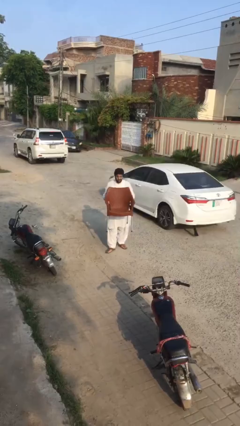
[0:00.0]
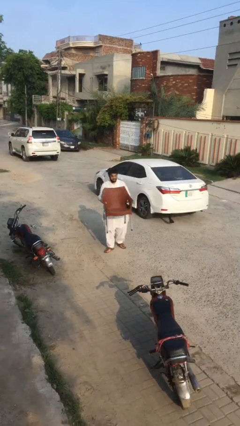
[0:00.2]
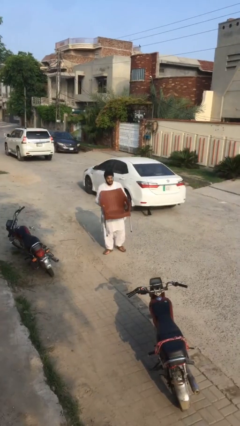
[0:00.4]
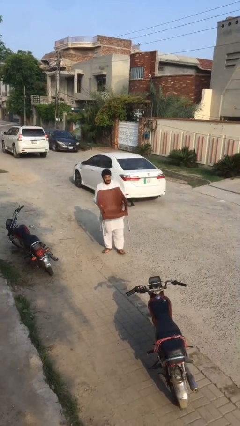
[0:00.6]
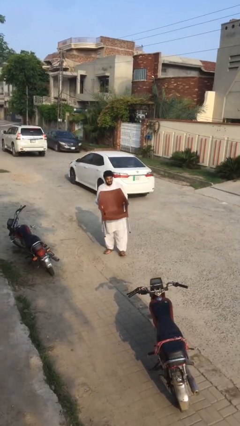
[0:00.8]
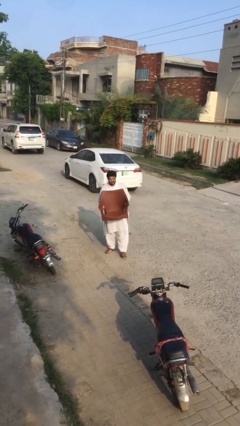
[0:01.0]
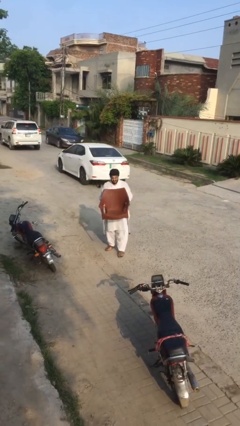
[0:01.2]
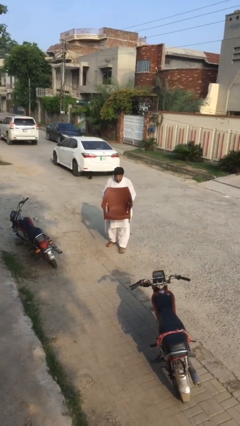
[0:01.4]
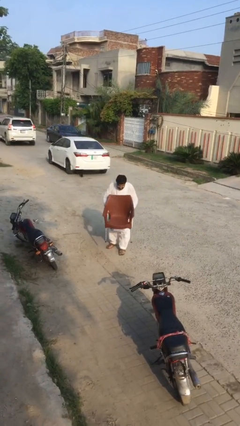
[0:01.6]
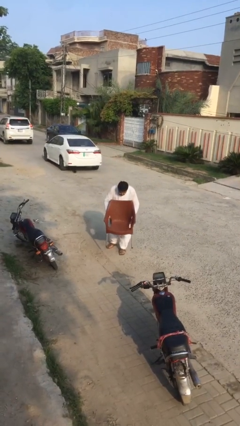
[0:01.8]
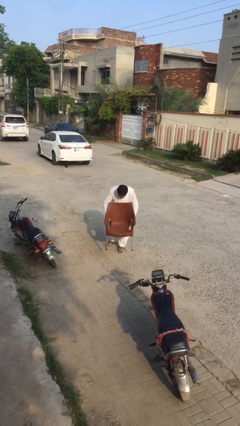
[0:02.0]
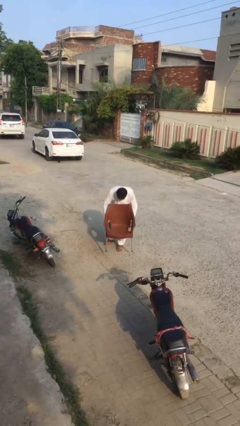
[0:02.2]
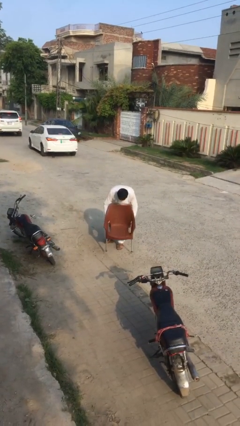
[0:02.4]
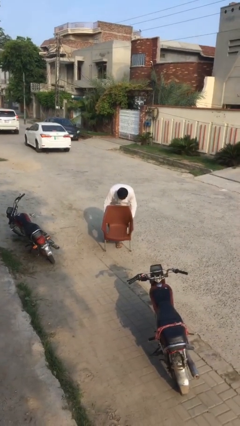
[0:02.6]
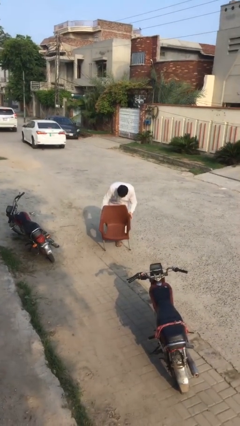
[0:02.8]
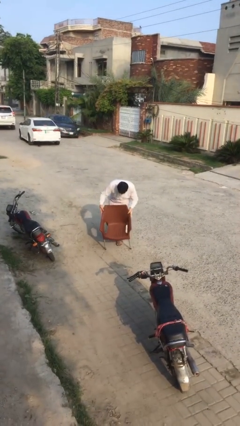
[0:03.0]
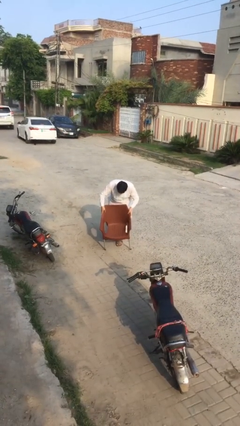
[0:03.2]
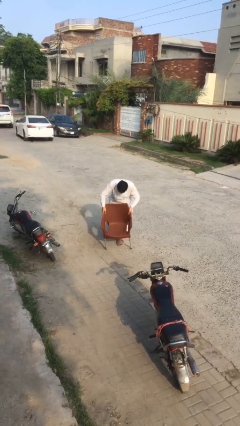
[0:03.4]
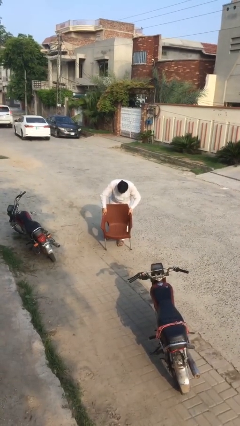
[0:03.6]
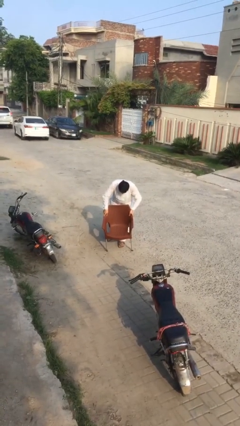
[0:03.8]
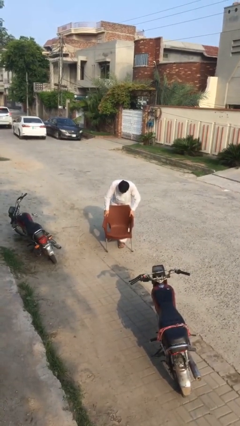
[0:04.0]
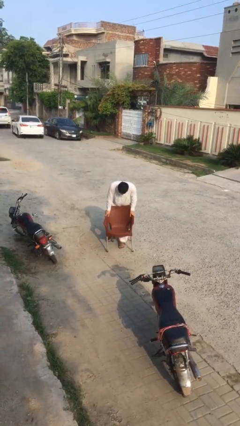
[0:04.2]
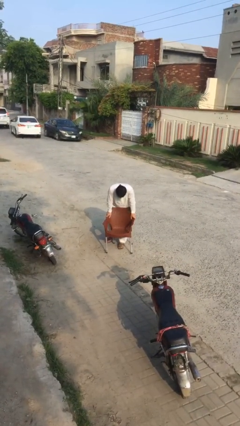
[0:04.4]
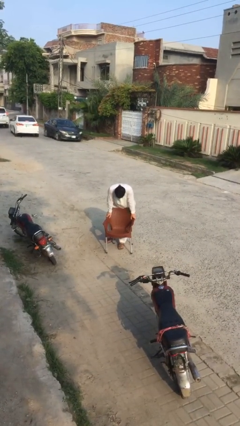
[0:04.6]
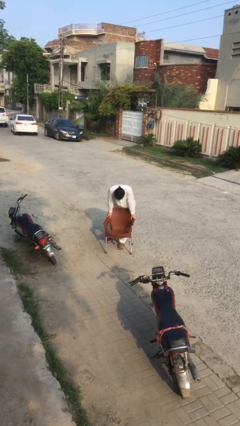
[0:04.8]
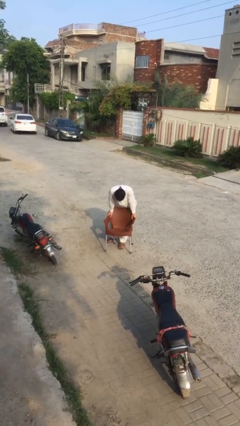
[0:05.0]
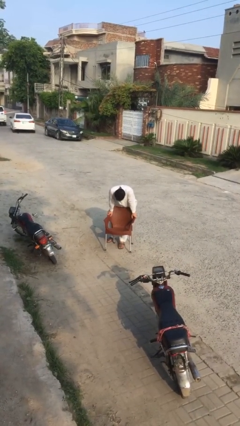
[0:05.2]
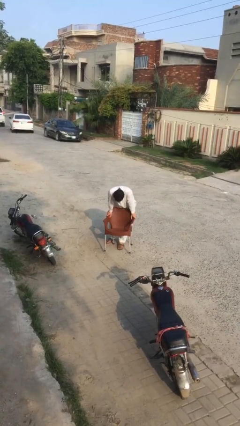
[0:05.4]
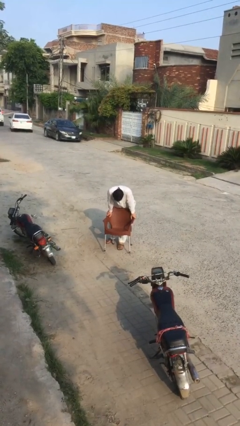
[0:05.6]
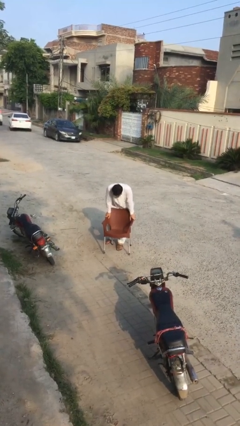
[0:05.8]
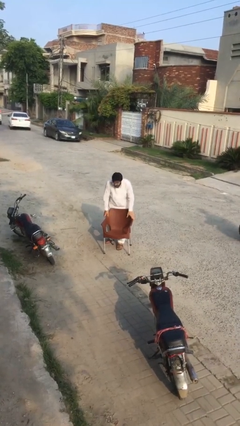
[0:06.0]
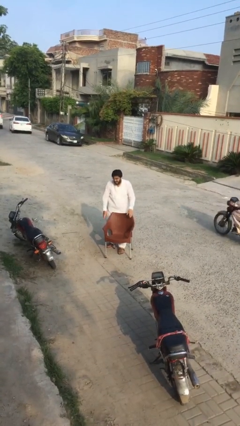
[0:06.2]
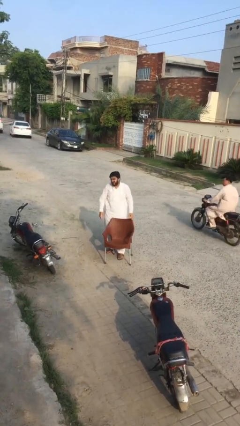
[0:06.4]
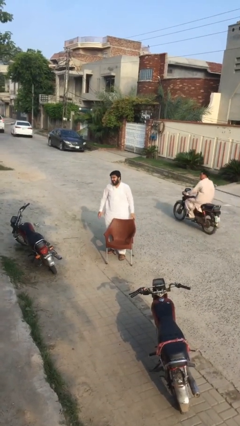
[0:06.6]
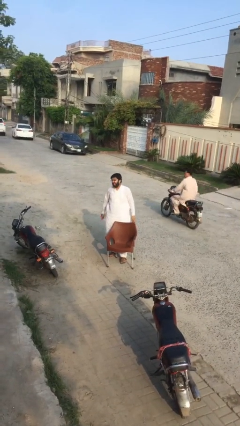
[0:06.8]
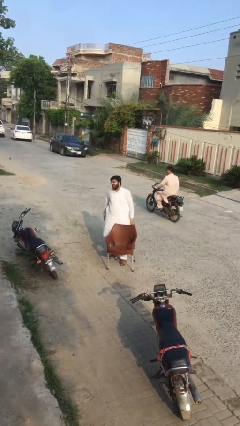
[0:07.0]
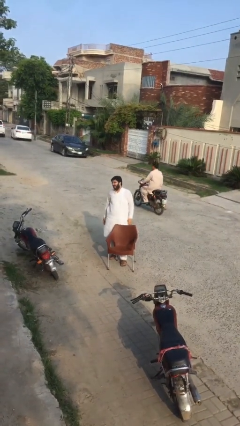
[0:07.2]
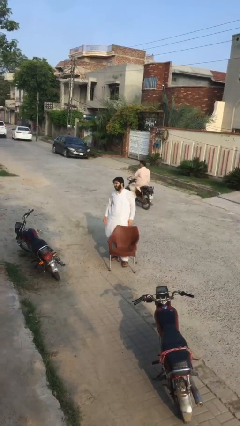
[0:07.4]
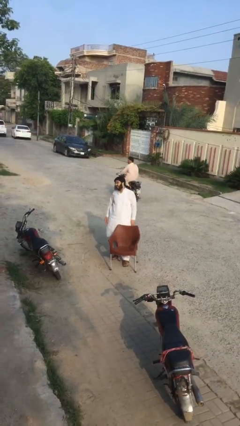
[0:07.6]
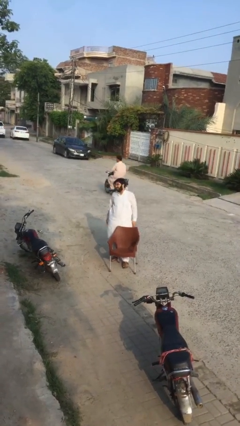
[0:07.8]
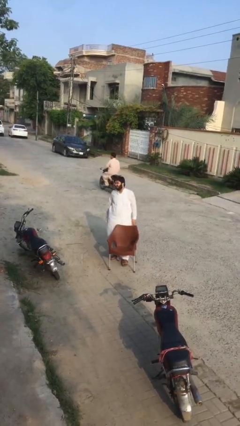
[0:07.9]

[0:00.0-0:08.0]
person puts down object on floor

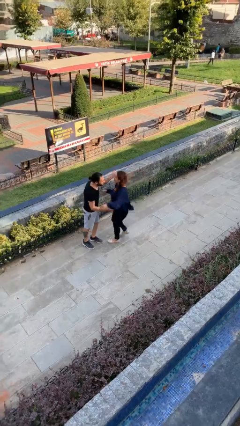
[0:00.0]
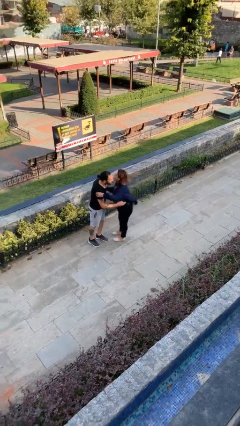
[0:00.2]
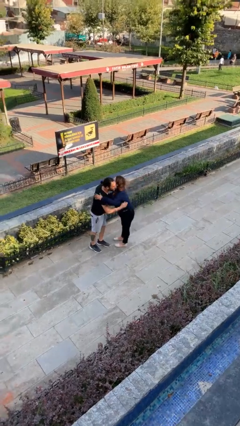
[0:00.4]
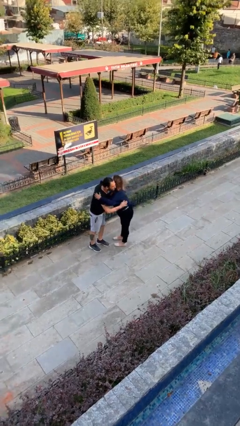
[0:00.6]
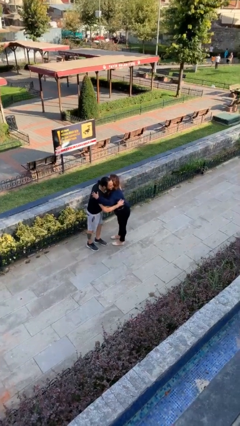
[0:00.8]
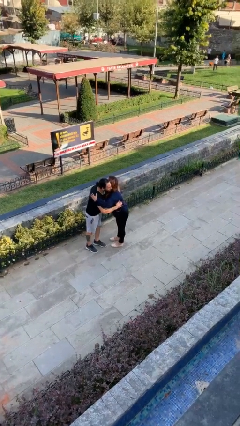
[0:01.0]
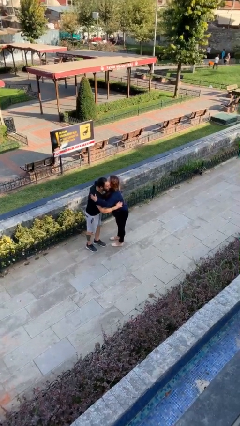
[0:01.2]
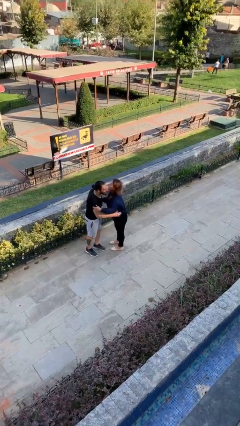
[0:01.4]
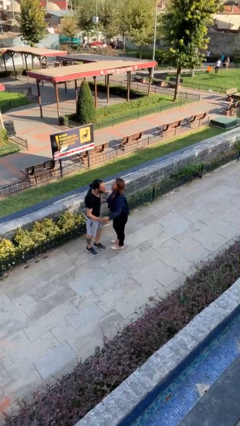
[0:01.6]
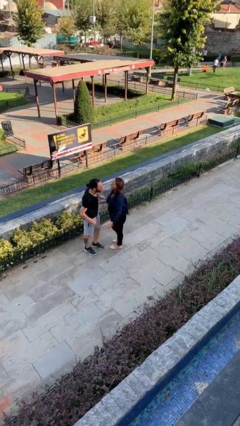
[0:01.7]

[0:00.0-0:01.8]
person embraces person

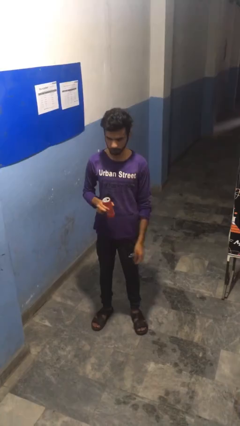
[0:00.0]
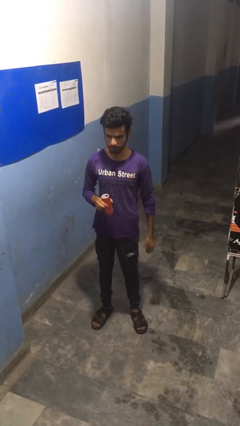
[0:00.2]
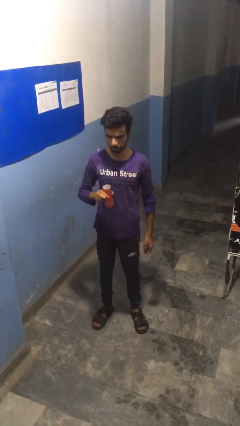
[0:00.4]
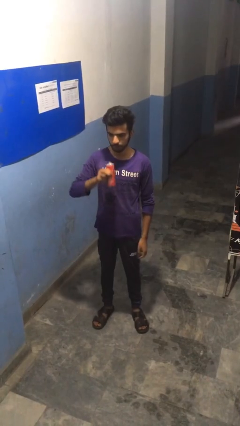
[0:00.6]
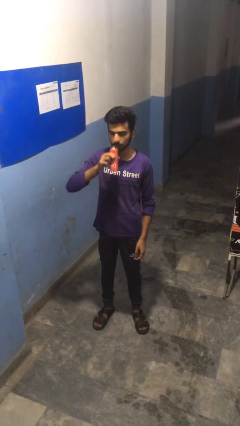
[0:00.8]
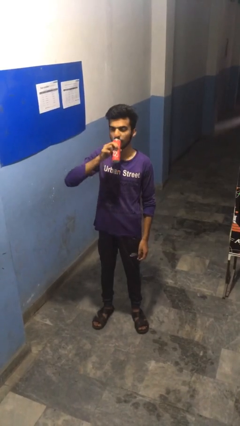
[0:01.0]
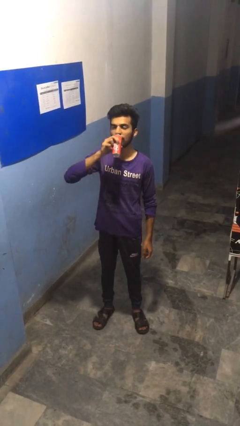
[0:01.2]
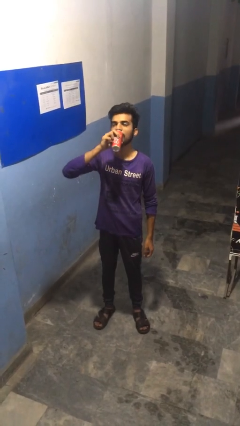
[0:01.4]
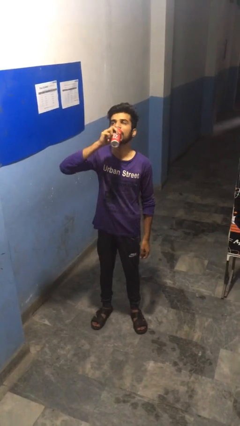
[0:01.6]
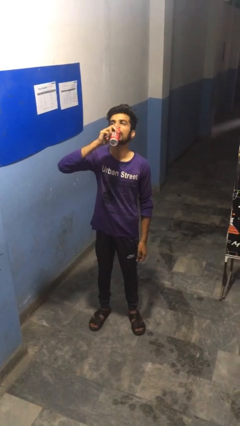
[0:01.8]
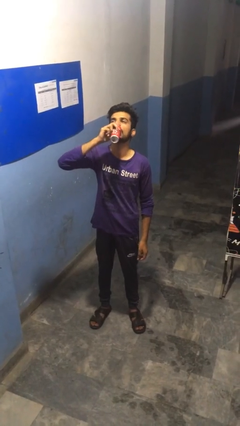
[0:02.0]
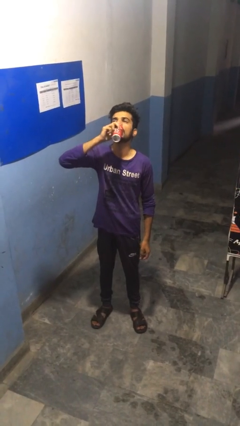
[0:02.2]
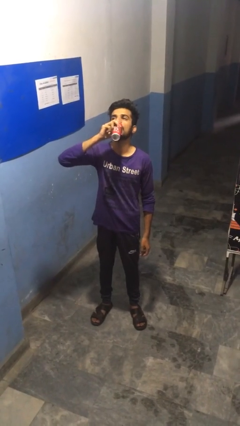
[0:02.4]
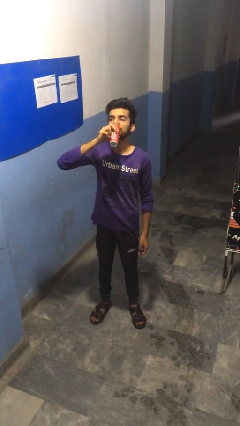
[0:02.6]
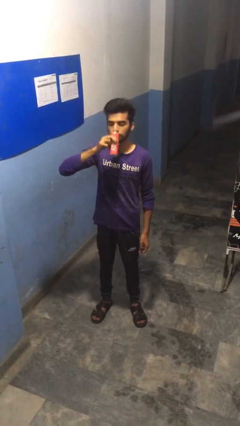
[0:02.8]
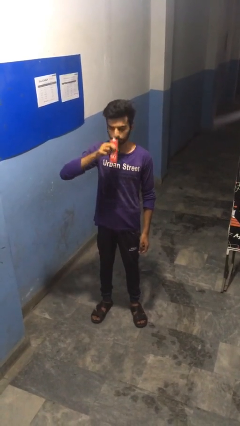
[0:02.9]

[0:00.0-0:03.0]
person drinks from beverage can

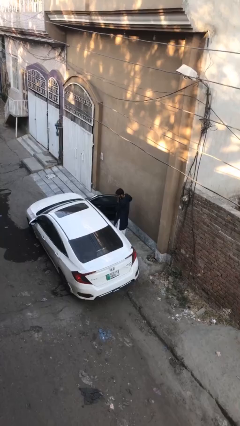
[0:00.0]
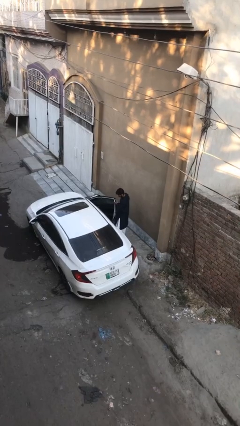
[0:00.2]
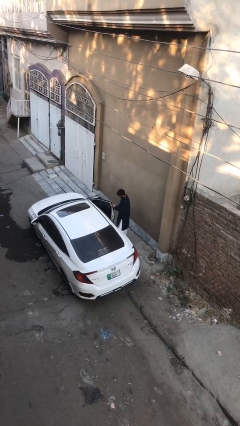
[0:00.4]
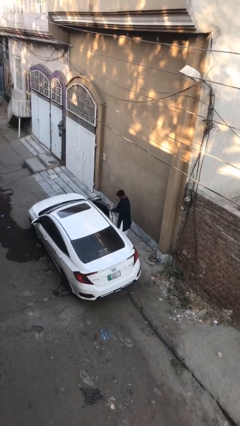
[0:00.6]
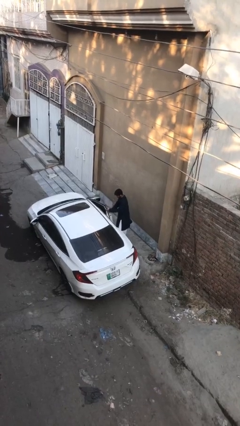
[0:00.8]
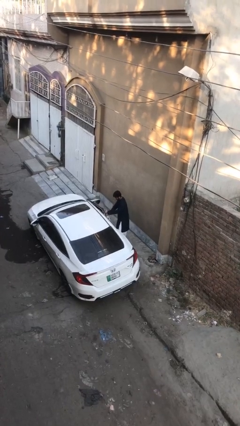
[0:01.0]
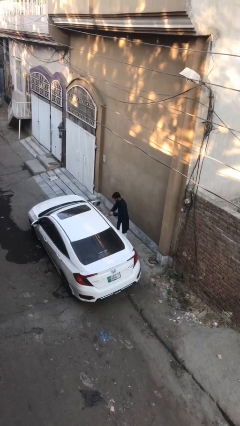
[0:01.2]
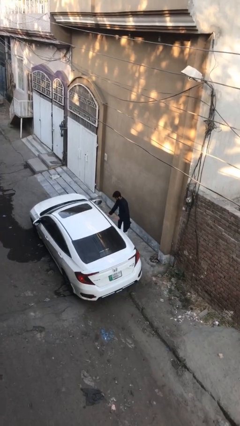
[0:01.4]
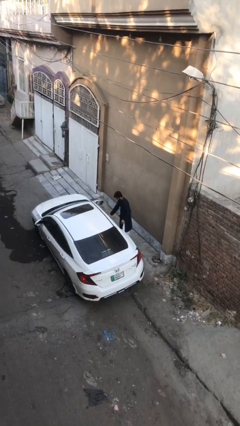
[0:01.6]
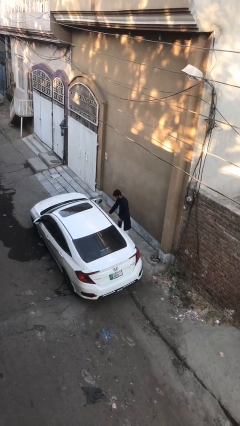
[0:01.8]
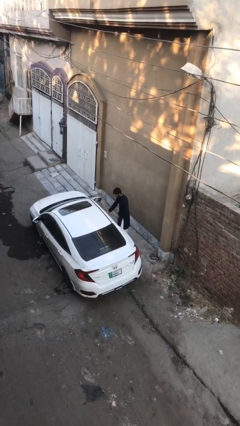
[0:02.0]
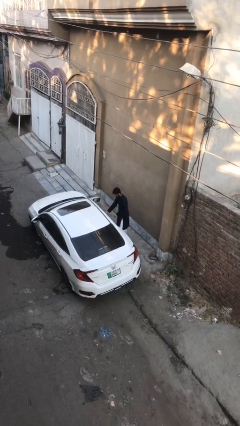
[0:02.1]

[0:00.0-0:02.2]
person closes car door

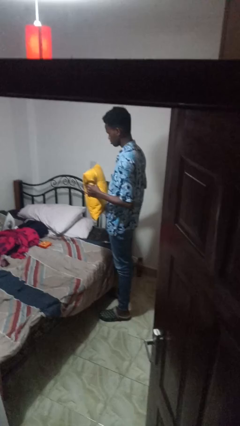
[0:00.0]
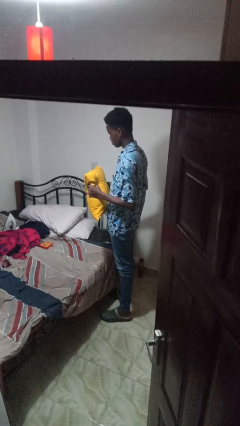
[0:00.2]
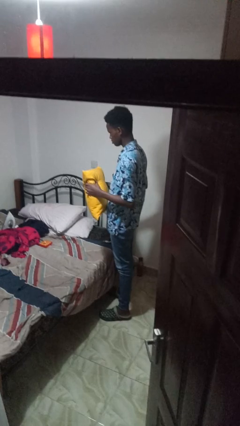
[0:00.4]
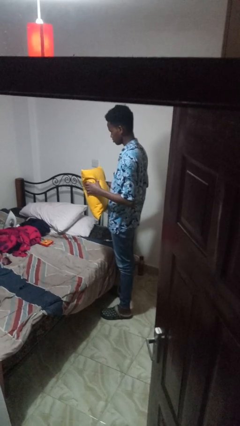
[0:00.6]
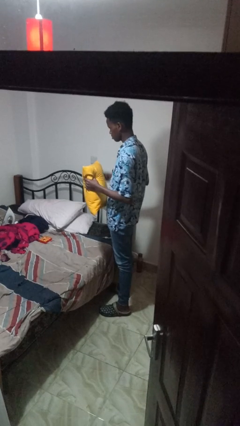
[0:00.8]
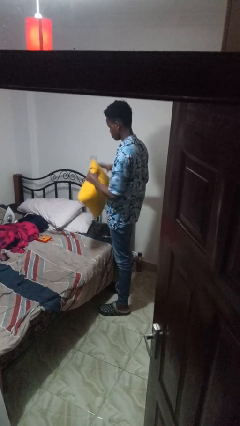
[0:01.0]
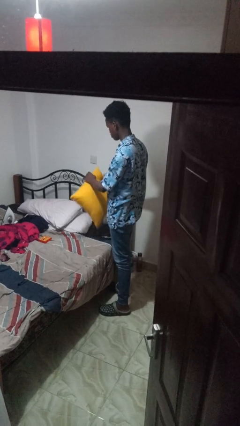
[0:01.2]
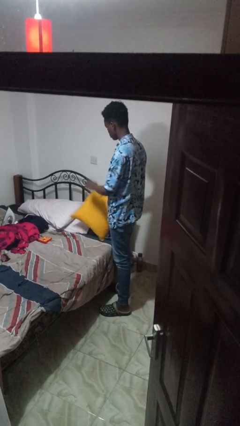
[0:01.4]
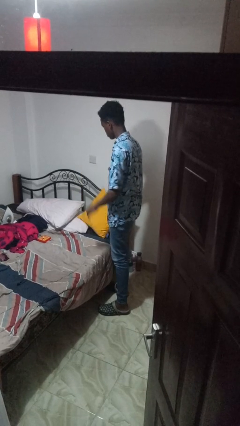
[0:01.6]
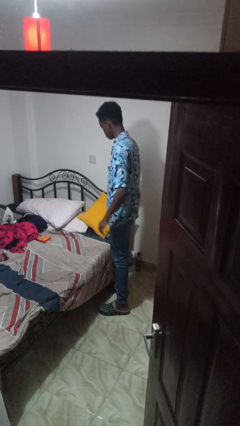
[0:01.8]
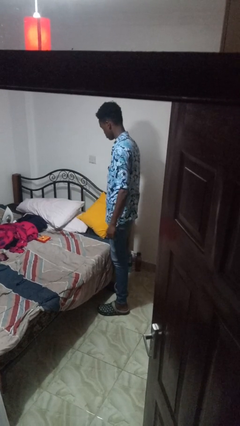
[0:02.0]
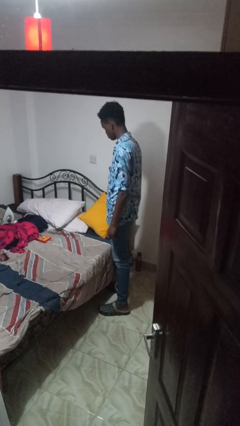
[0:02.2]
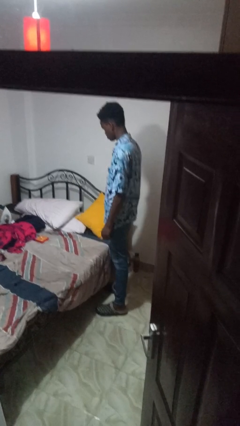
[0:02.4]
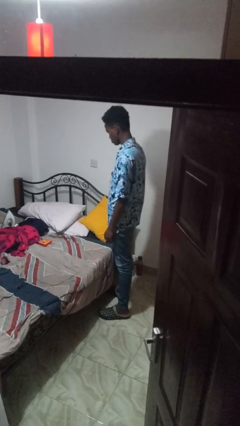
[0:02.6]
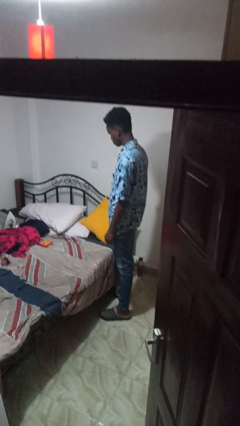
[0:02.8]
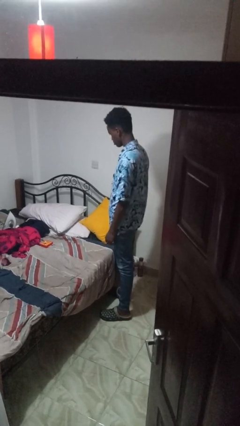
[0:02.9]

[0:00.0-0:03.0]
person puts down object on bed
